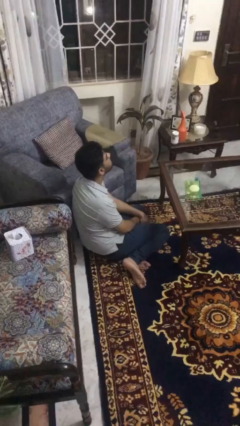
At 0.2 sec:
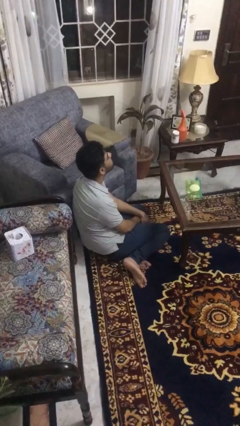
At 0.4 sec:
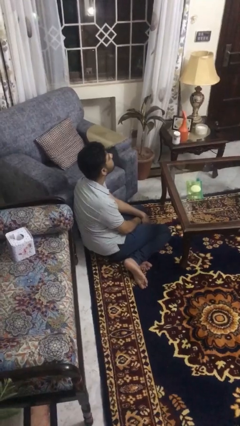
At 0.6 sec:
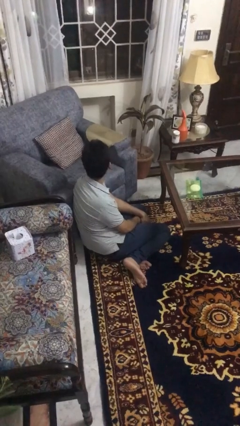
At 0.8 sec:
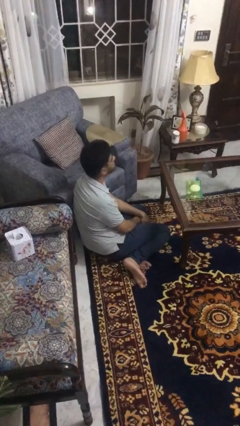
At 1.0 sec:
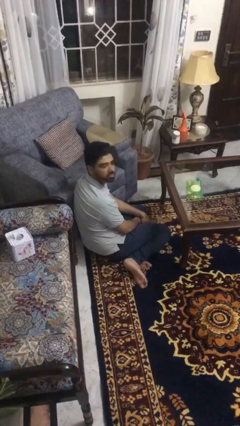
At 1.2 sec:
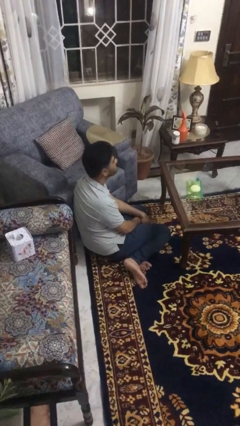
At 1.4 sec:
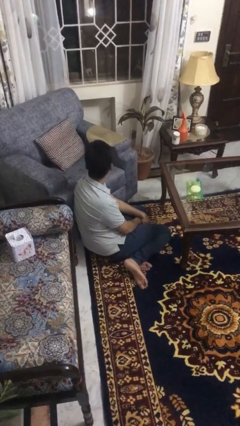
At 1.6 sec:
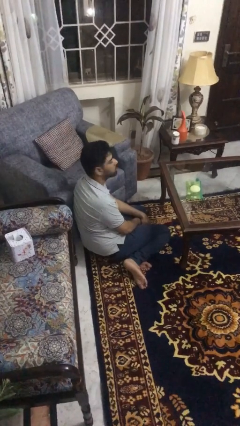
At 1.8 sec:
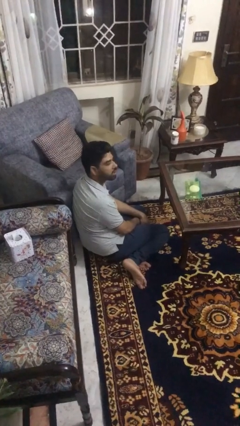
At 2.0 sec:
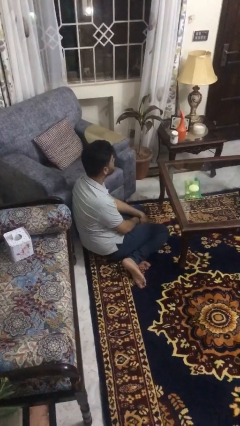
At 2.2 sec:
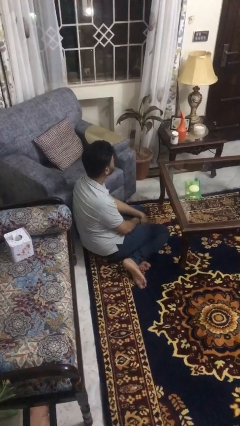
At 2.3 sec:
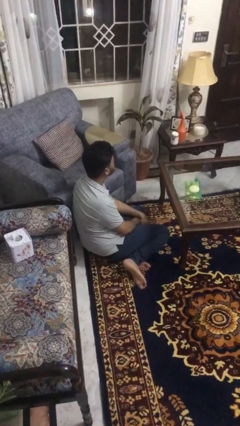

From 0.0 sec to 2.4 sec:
person shakes head

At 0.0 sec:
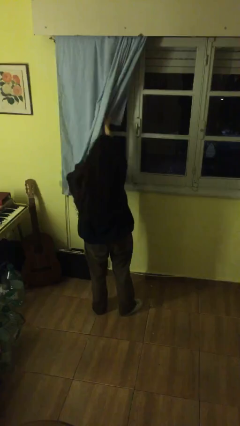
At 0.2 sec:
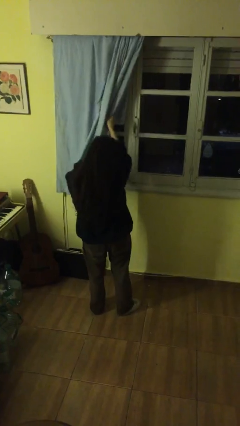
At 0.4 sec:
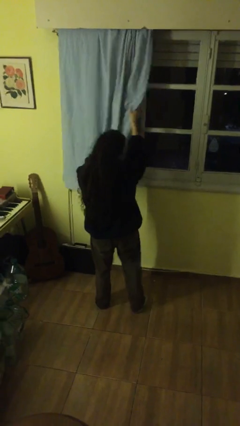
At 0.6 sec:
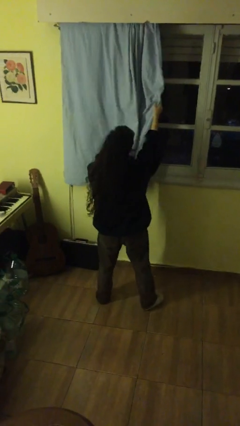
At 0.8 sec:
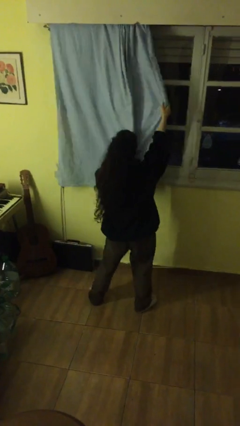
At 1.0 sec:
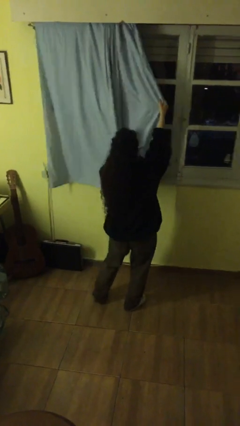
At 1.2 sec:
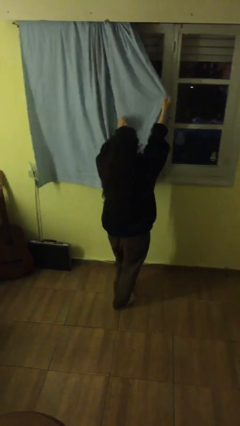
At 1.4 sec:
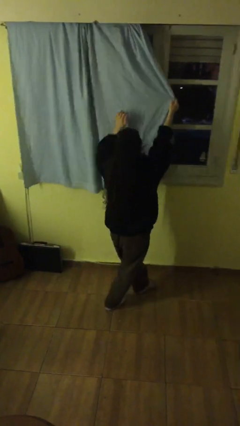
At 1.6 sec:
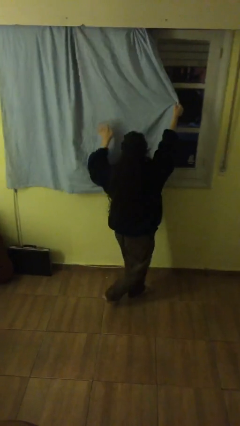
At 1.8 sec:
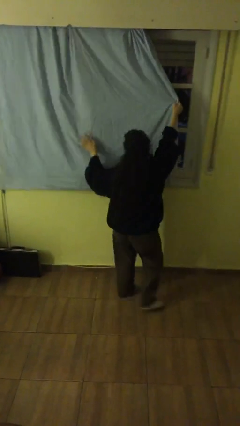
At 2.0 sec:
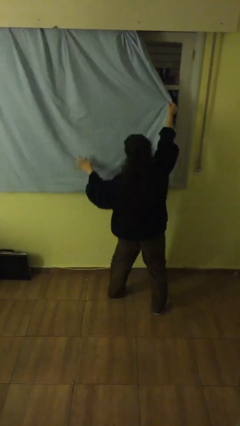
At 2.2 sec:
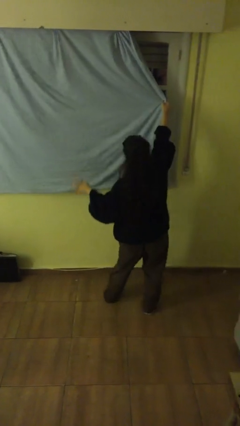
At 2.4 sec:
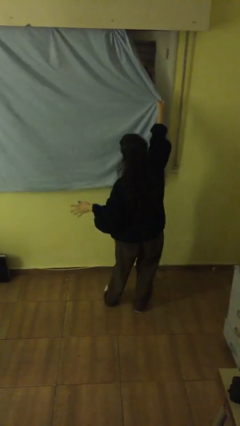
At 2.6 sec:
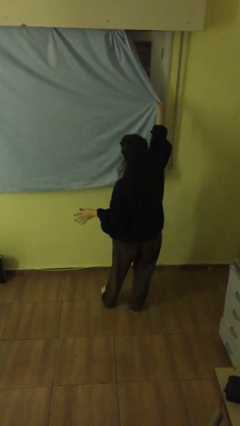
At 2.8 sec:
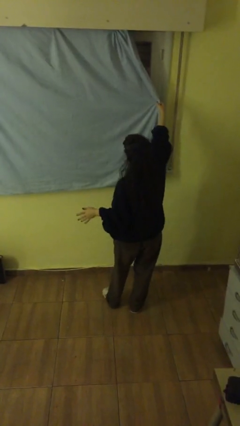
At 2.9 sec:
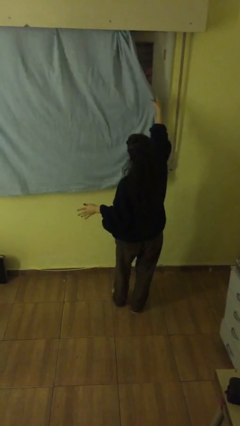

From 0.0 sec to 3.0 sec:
person closes curtains

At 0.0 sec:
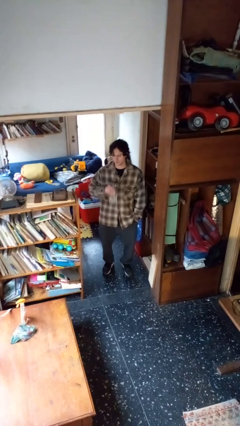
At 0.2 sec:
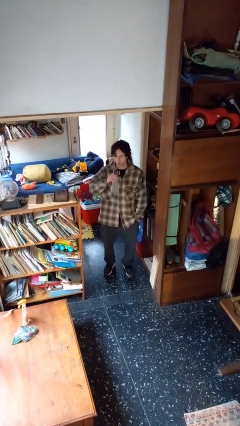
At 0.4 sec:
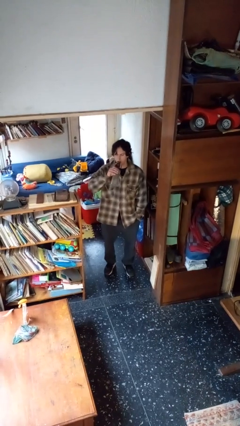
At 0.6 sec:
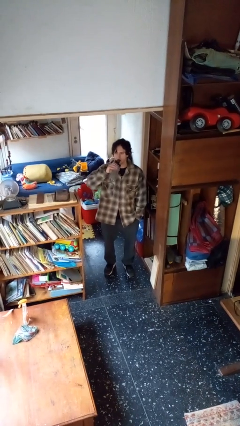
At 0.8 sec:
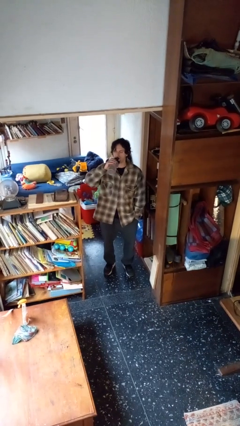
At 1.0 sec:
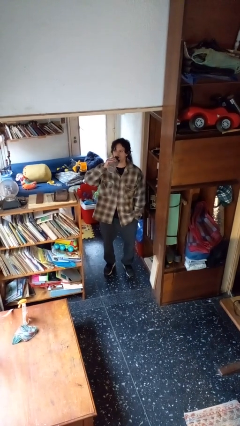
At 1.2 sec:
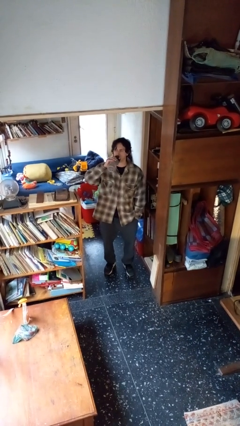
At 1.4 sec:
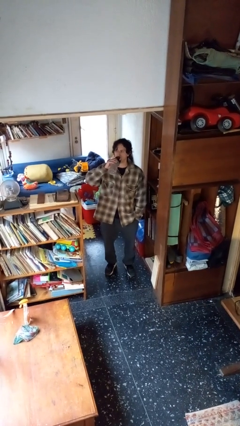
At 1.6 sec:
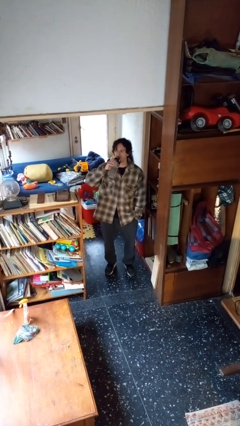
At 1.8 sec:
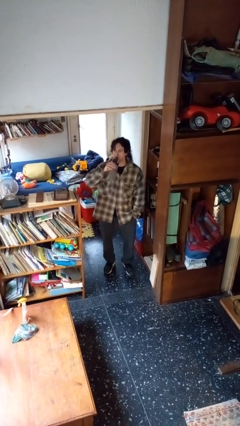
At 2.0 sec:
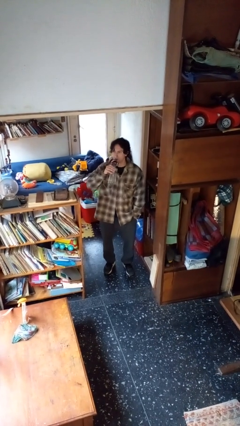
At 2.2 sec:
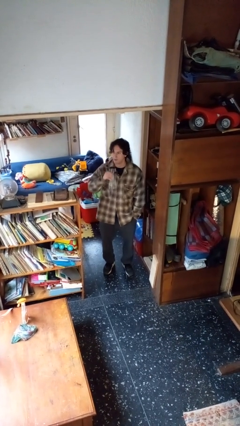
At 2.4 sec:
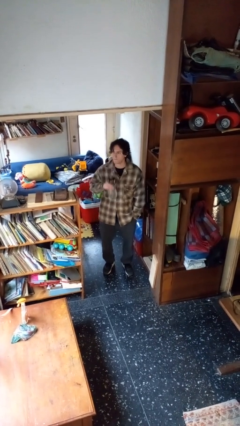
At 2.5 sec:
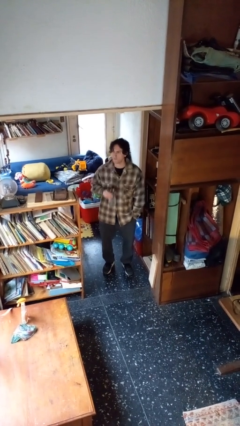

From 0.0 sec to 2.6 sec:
person drinks from bottle

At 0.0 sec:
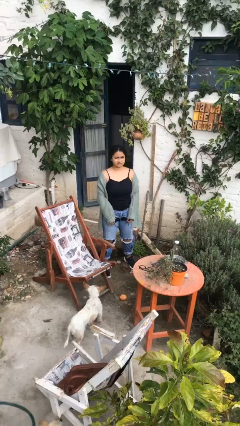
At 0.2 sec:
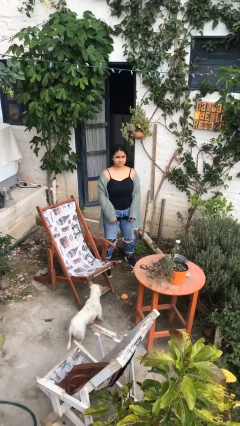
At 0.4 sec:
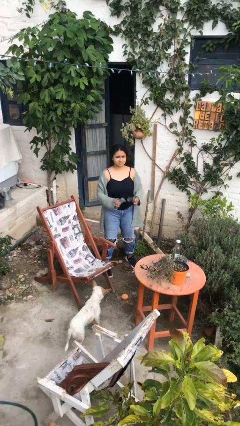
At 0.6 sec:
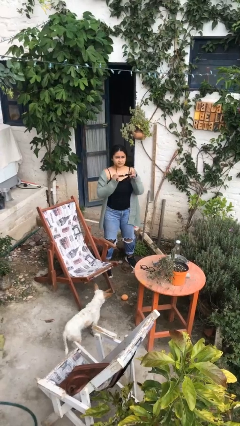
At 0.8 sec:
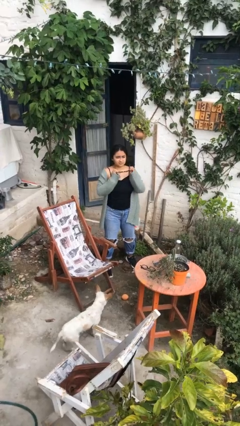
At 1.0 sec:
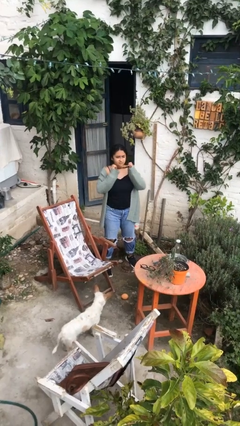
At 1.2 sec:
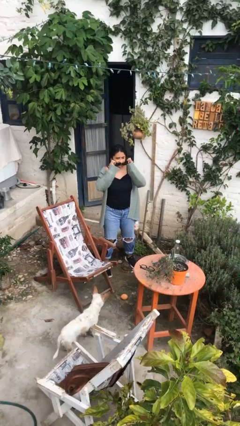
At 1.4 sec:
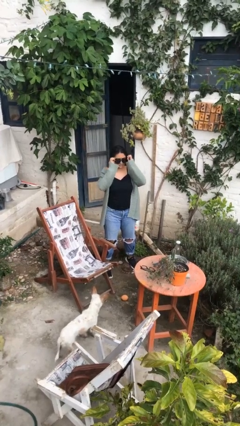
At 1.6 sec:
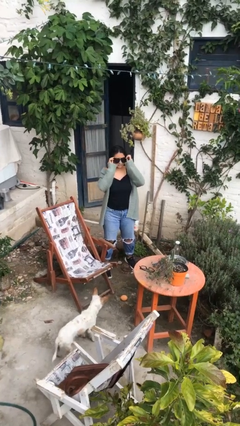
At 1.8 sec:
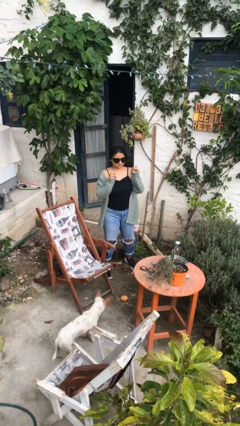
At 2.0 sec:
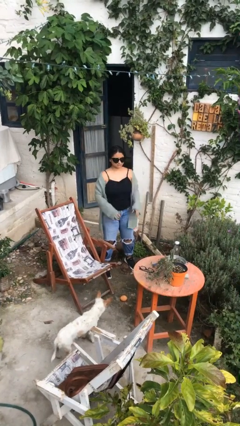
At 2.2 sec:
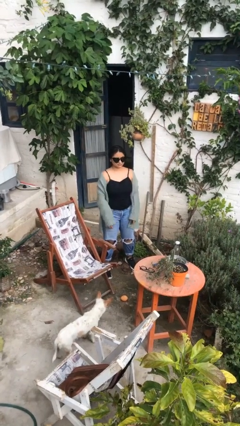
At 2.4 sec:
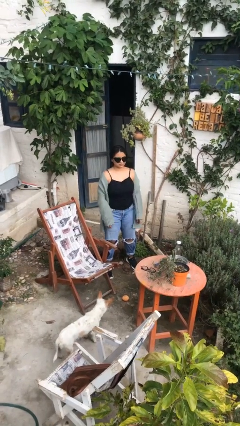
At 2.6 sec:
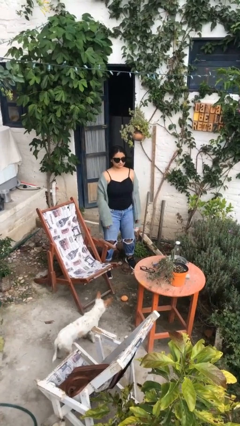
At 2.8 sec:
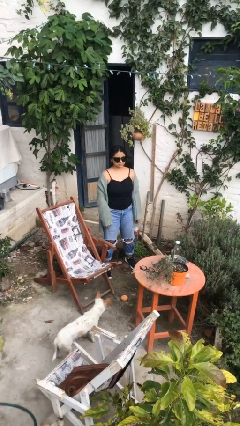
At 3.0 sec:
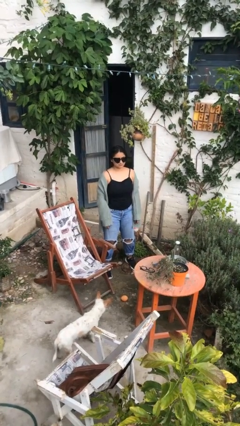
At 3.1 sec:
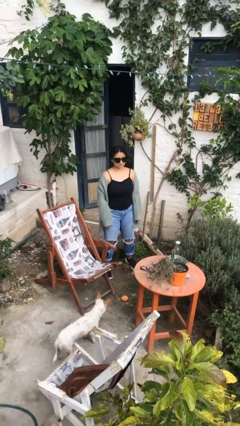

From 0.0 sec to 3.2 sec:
person puts on sunglasses

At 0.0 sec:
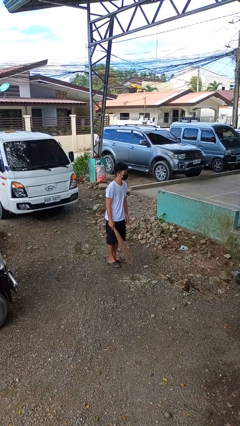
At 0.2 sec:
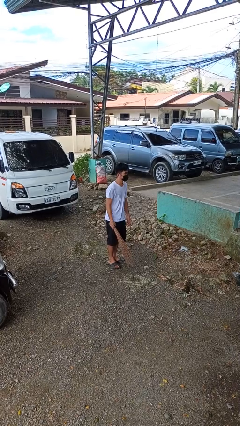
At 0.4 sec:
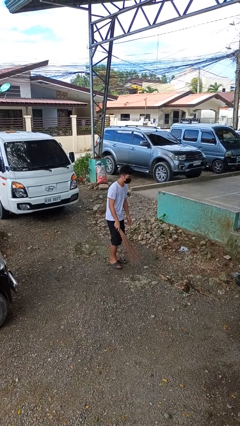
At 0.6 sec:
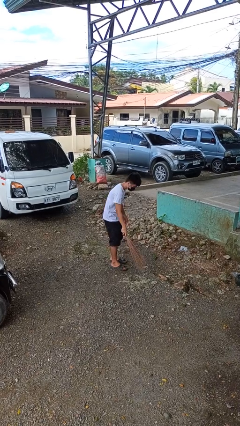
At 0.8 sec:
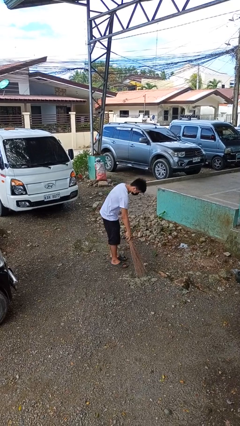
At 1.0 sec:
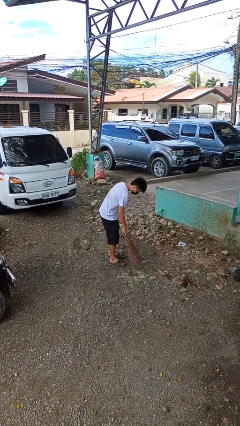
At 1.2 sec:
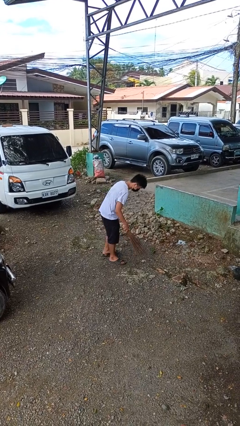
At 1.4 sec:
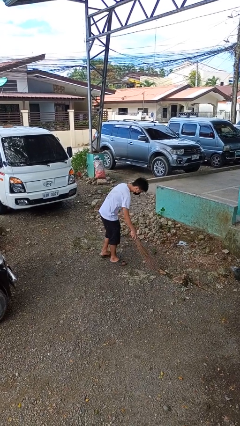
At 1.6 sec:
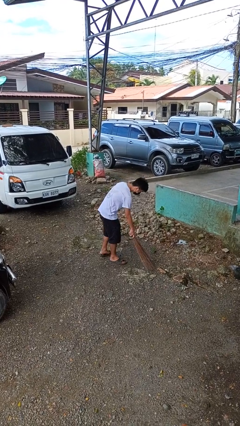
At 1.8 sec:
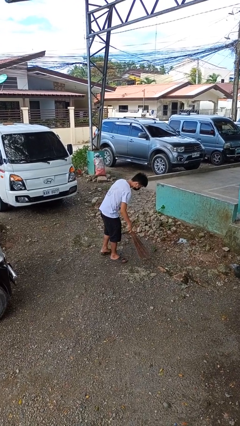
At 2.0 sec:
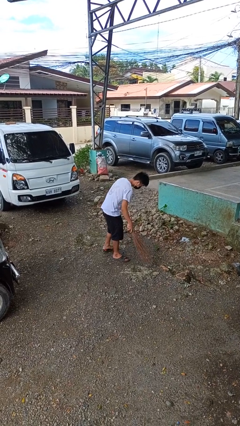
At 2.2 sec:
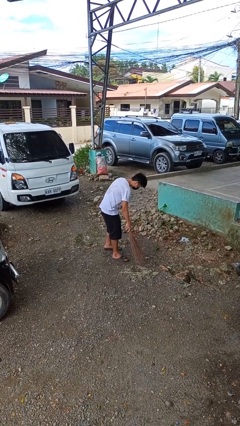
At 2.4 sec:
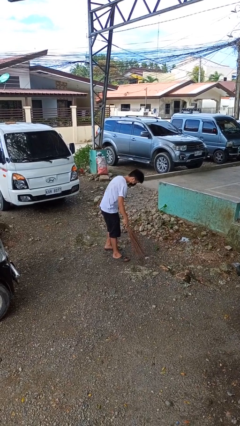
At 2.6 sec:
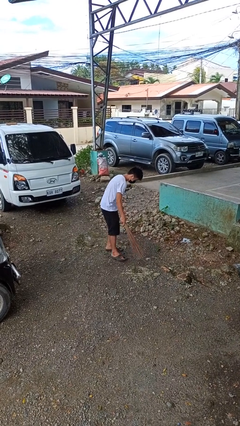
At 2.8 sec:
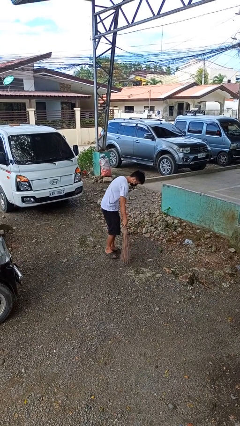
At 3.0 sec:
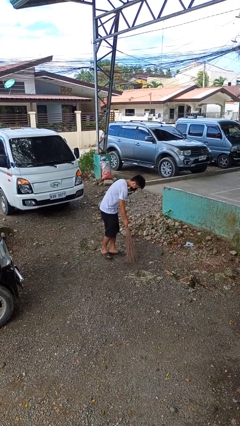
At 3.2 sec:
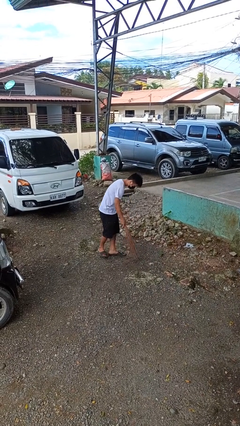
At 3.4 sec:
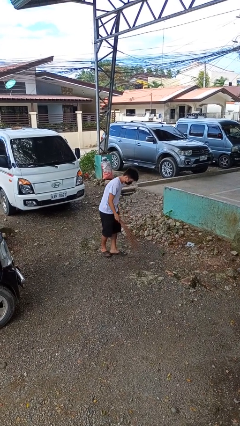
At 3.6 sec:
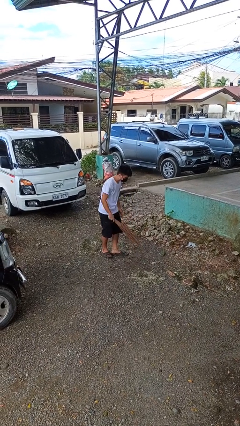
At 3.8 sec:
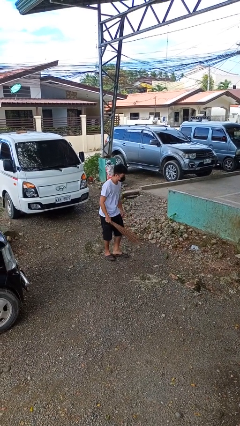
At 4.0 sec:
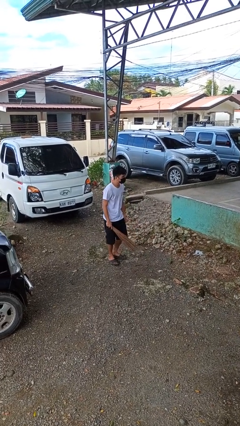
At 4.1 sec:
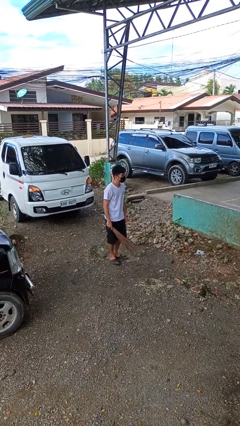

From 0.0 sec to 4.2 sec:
person sweeps floor

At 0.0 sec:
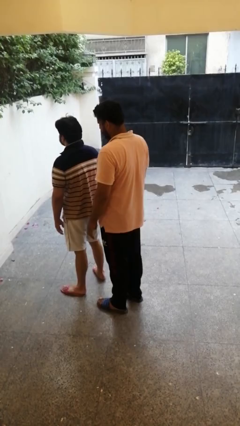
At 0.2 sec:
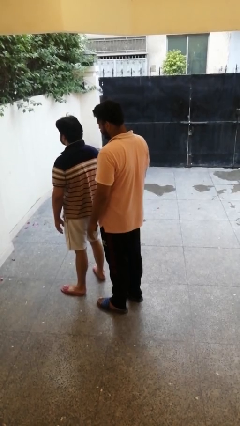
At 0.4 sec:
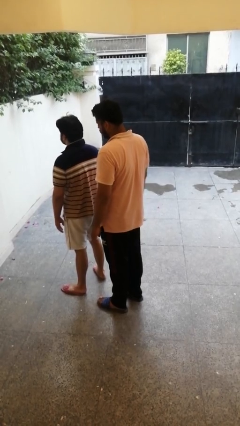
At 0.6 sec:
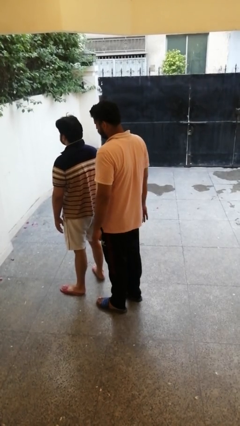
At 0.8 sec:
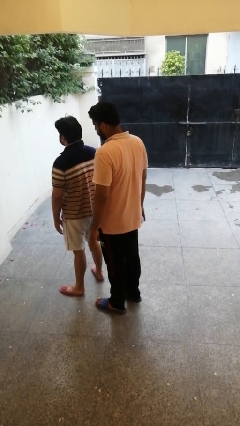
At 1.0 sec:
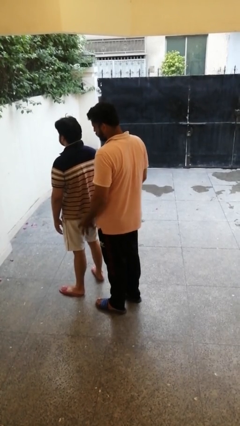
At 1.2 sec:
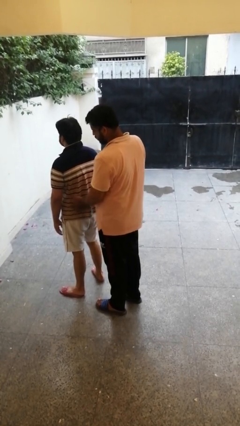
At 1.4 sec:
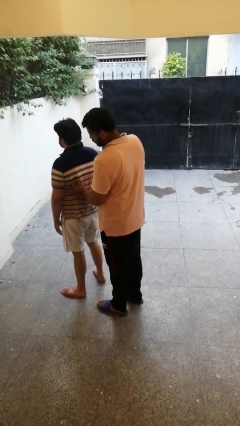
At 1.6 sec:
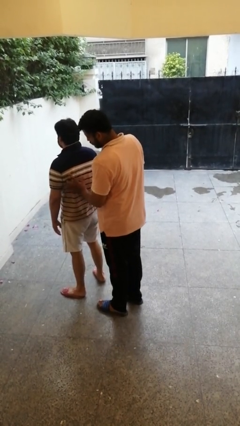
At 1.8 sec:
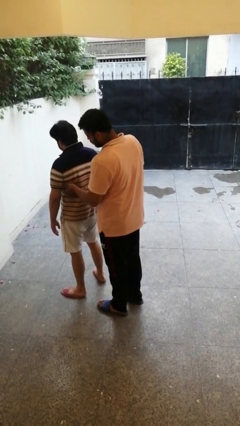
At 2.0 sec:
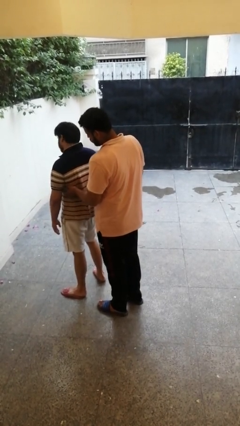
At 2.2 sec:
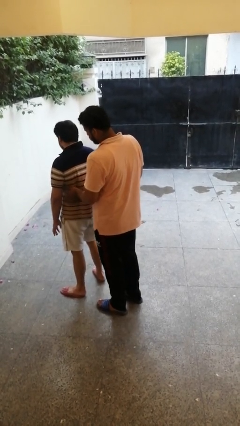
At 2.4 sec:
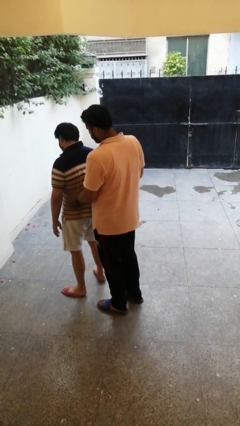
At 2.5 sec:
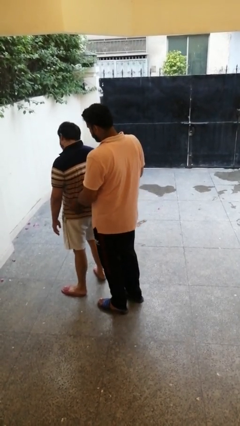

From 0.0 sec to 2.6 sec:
person tickles person
